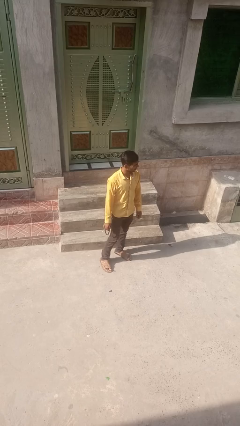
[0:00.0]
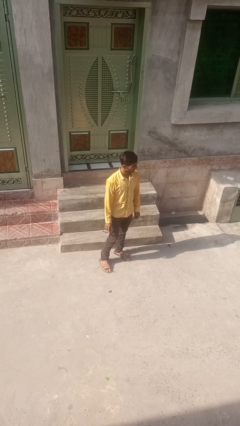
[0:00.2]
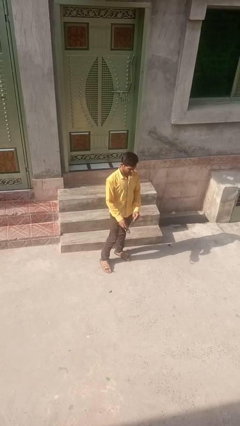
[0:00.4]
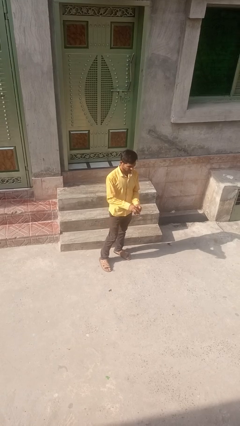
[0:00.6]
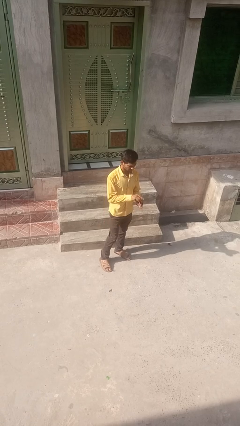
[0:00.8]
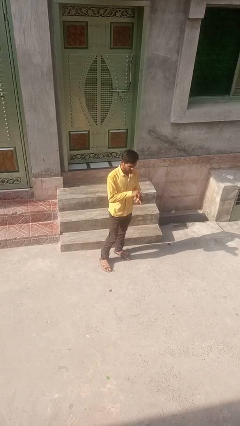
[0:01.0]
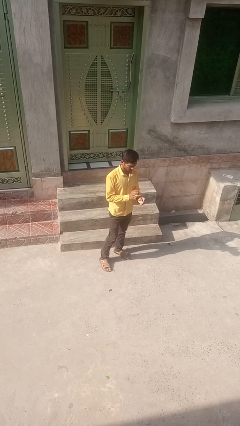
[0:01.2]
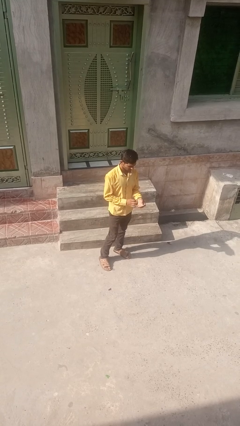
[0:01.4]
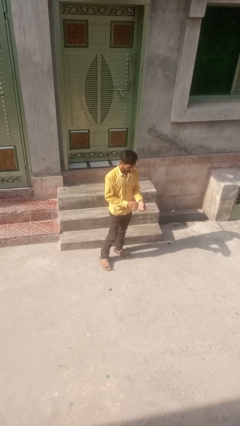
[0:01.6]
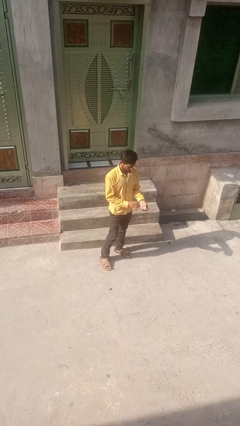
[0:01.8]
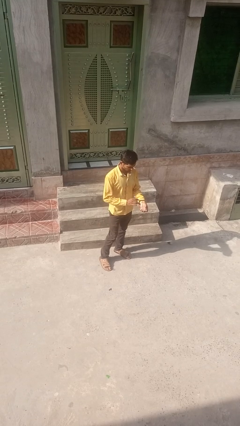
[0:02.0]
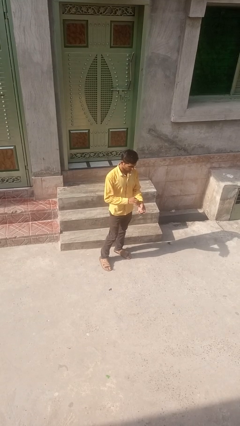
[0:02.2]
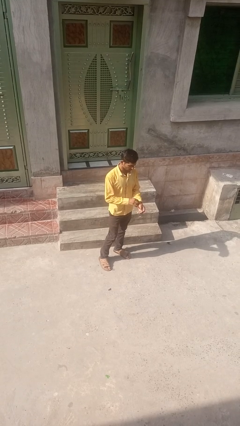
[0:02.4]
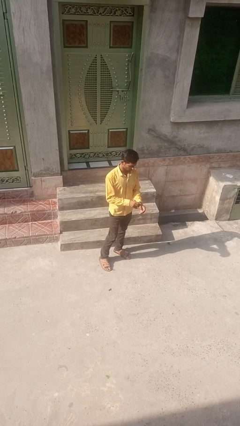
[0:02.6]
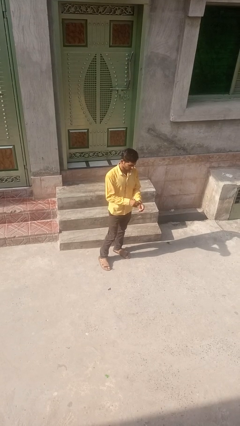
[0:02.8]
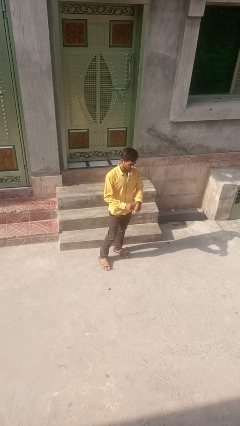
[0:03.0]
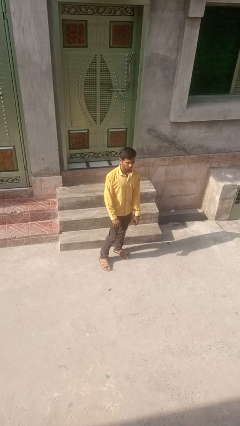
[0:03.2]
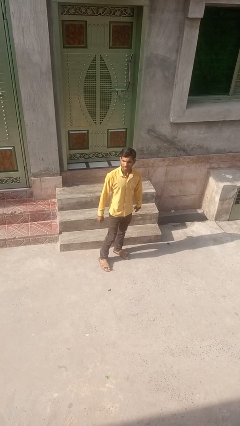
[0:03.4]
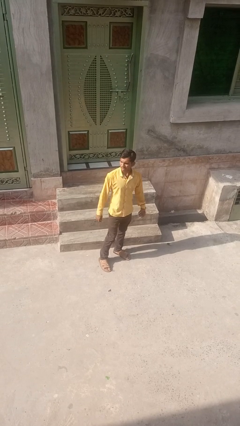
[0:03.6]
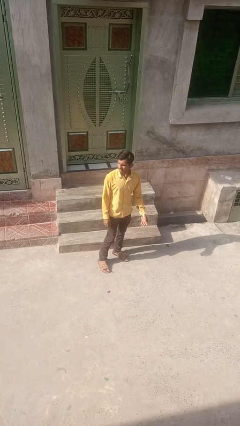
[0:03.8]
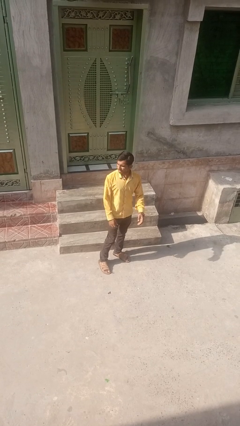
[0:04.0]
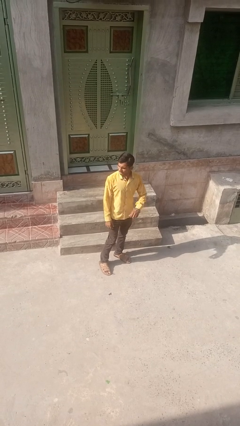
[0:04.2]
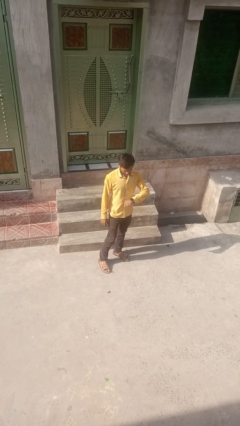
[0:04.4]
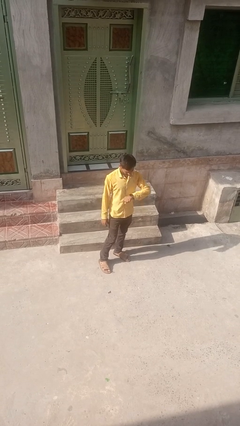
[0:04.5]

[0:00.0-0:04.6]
person puts on wristwatch

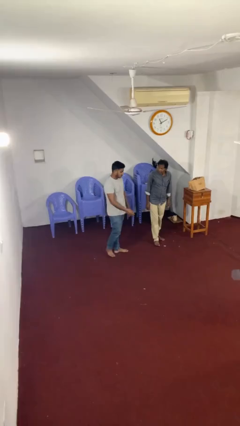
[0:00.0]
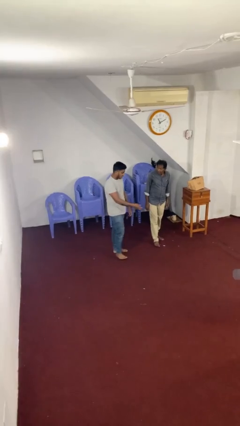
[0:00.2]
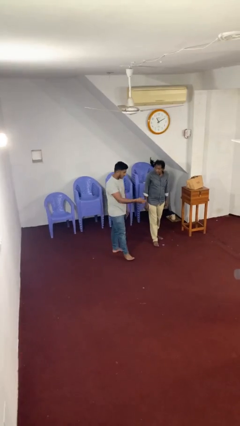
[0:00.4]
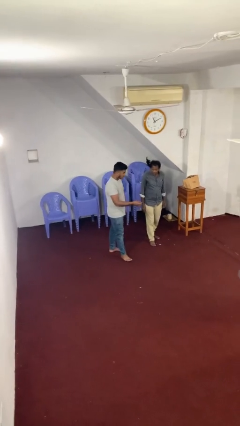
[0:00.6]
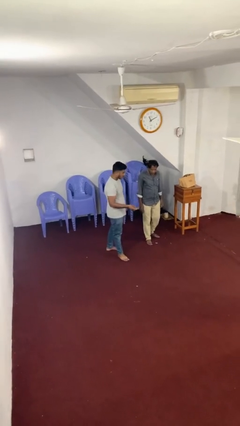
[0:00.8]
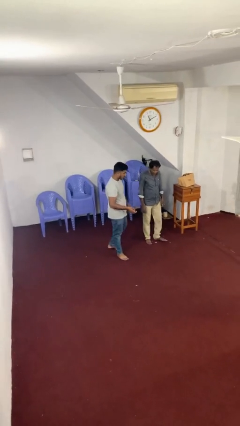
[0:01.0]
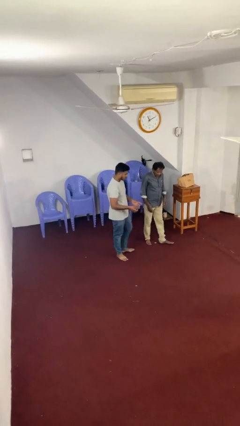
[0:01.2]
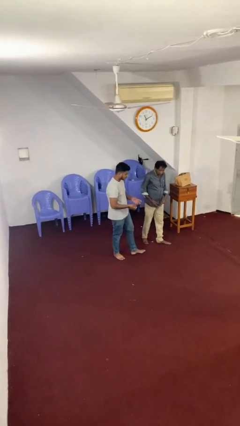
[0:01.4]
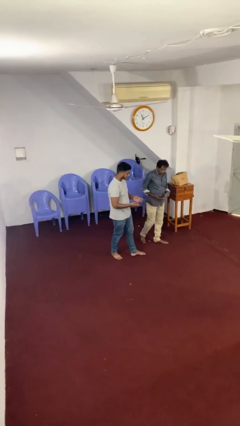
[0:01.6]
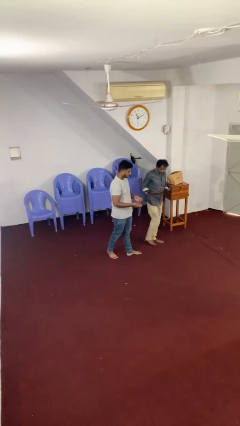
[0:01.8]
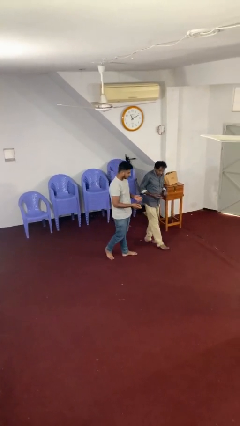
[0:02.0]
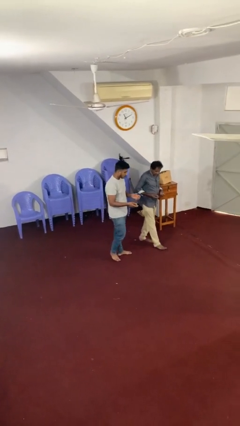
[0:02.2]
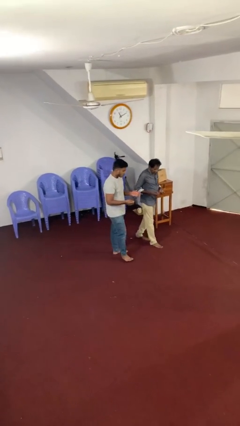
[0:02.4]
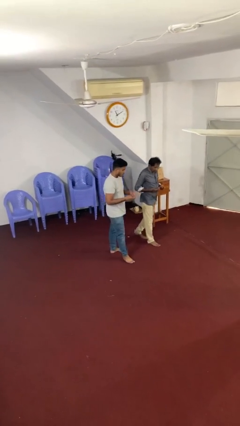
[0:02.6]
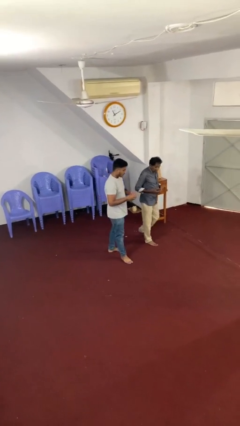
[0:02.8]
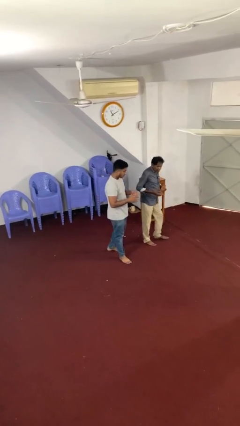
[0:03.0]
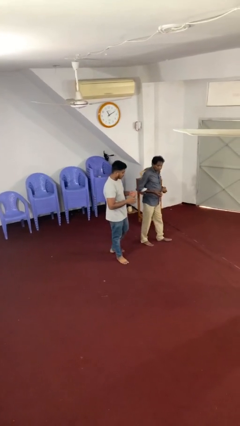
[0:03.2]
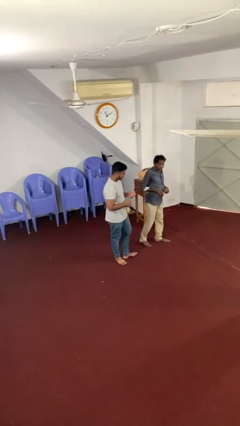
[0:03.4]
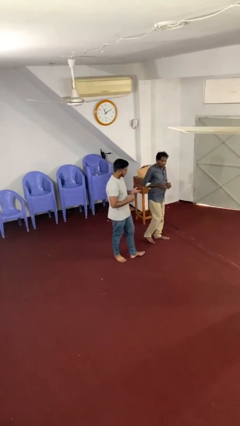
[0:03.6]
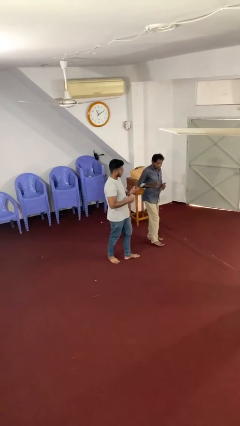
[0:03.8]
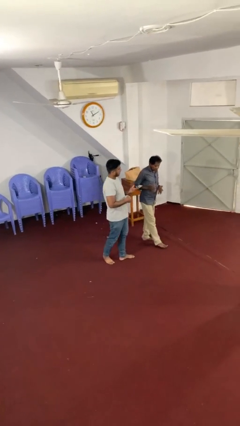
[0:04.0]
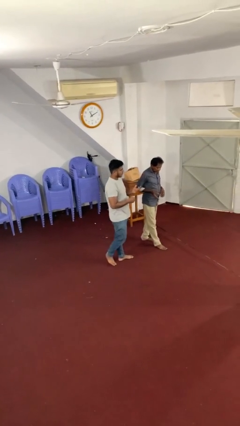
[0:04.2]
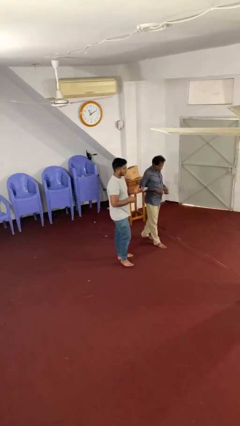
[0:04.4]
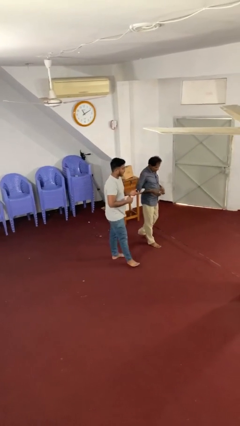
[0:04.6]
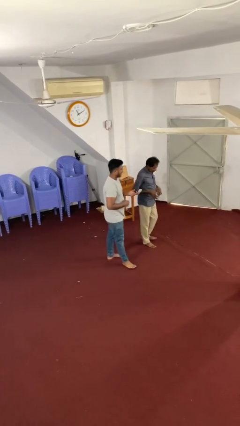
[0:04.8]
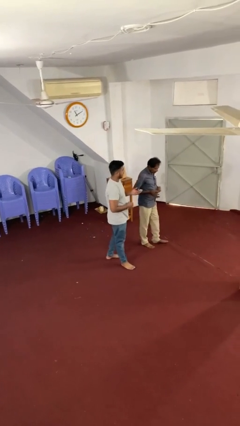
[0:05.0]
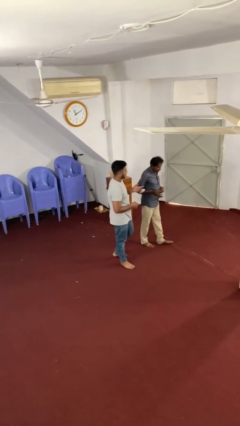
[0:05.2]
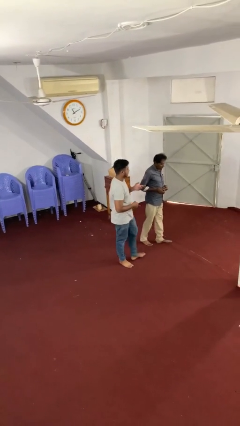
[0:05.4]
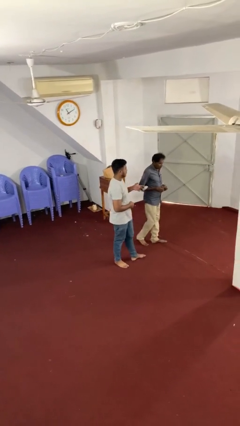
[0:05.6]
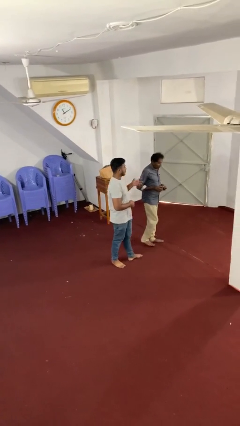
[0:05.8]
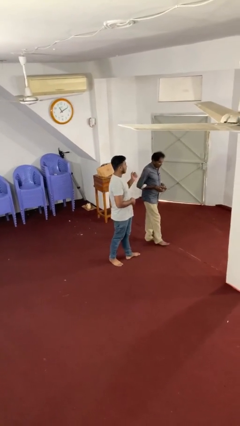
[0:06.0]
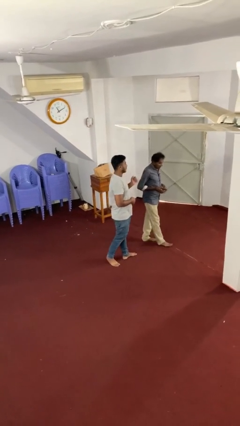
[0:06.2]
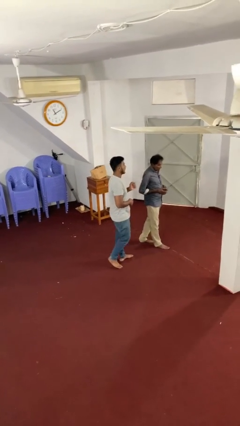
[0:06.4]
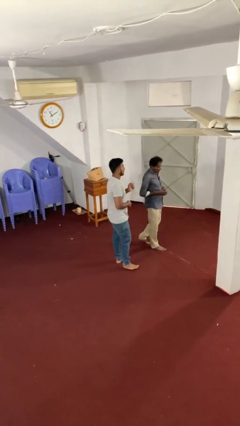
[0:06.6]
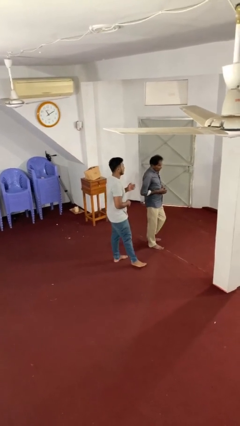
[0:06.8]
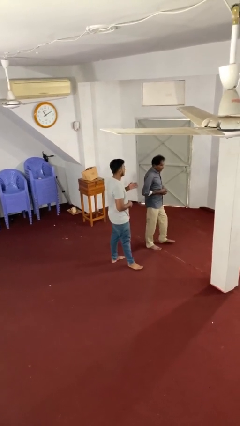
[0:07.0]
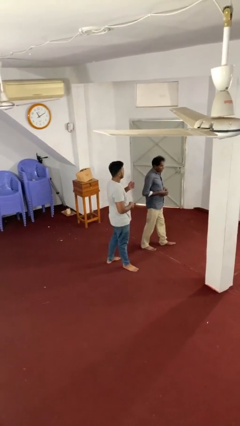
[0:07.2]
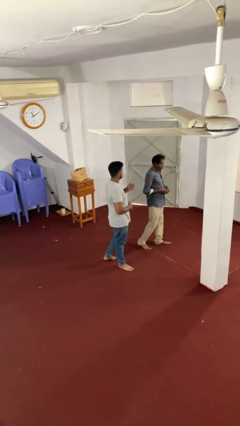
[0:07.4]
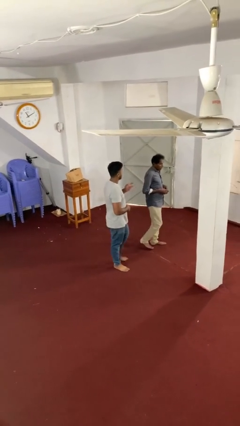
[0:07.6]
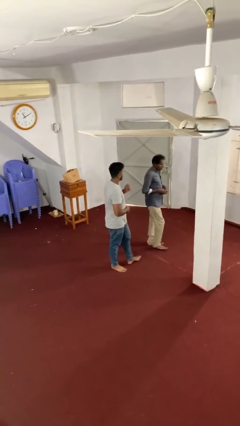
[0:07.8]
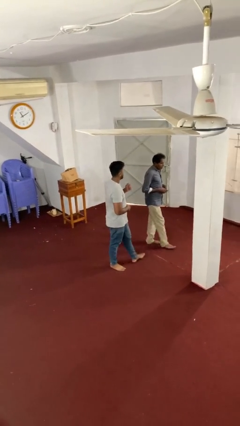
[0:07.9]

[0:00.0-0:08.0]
person talks to person

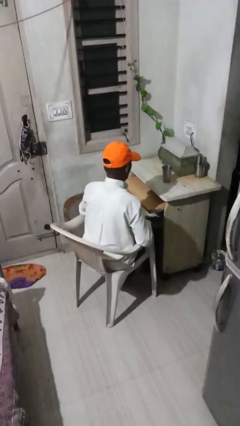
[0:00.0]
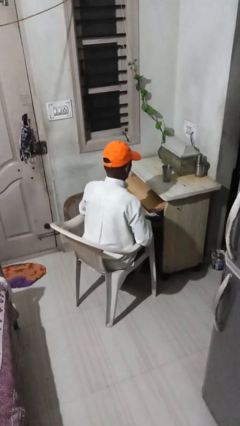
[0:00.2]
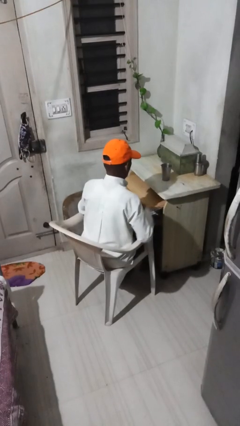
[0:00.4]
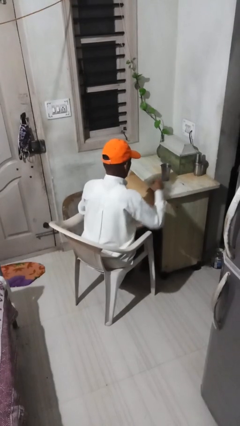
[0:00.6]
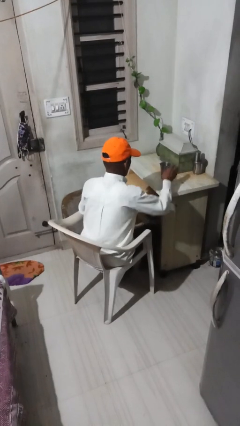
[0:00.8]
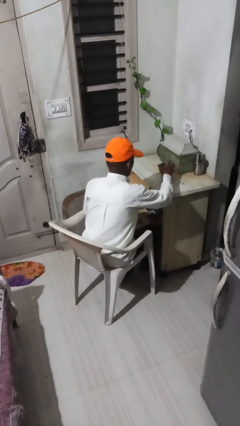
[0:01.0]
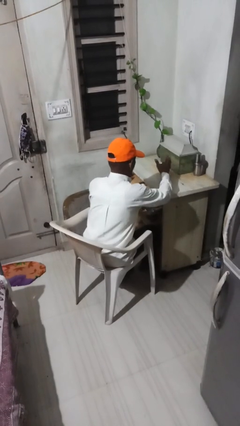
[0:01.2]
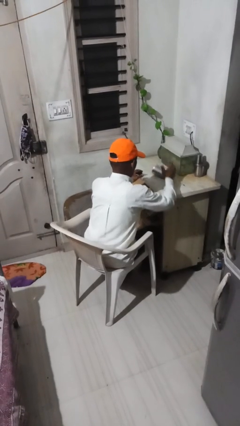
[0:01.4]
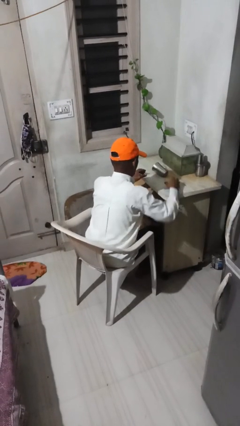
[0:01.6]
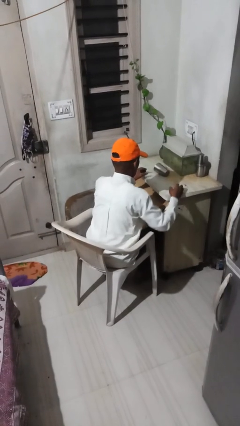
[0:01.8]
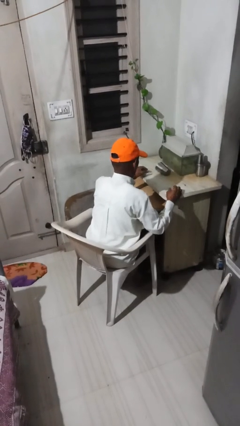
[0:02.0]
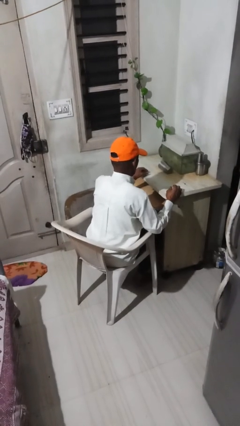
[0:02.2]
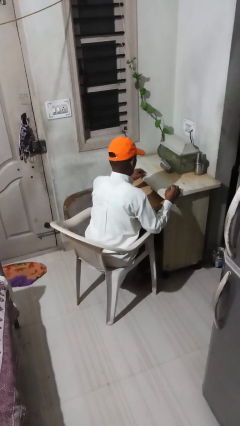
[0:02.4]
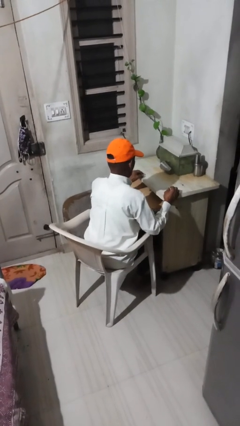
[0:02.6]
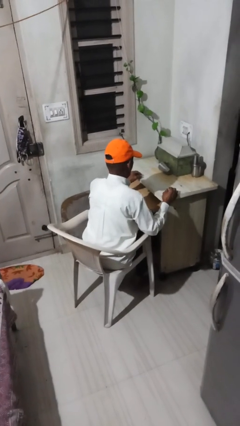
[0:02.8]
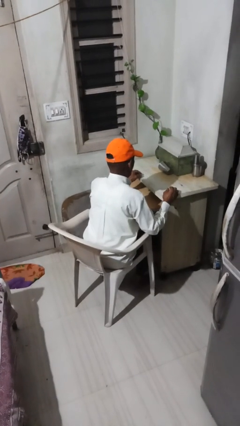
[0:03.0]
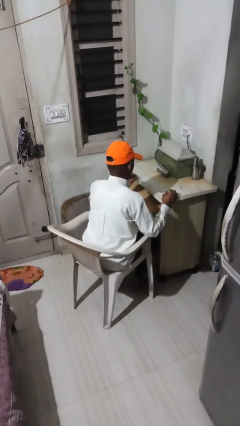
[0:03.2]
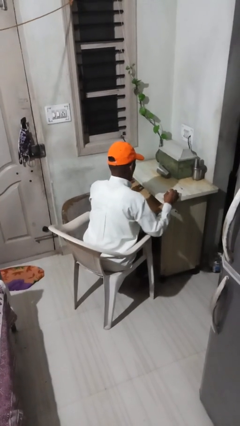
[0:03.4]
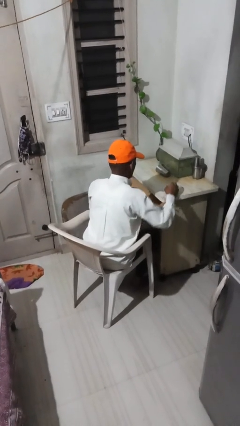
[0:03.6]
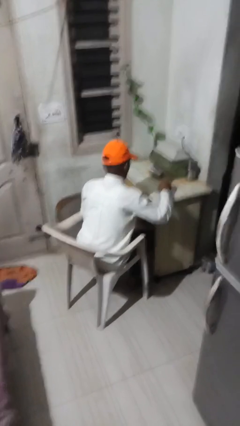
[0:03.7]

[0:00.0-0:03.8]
person knocks over glass

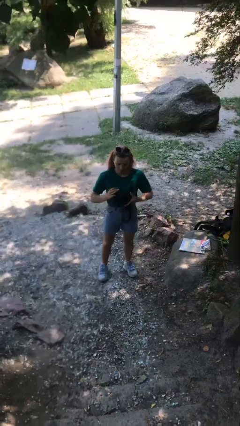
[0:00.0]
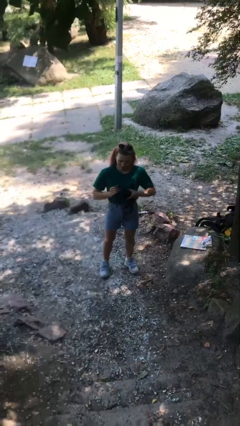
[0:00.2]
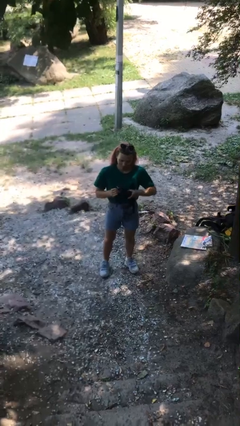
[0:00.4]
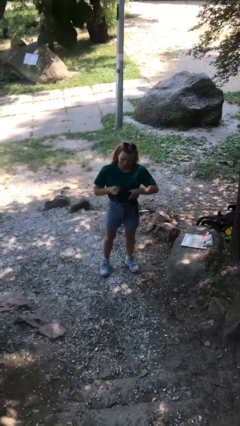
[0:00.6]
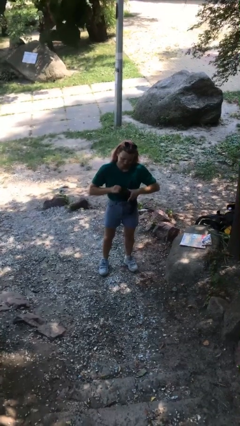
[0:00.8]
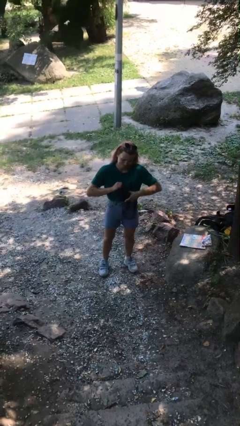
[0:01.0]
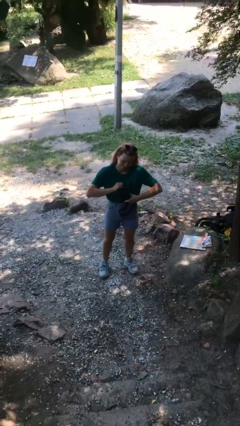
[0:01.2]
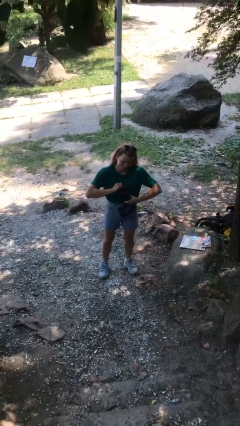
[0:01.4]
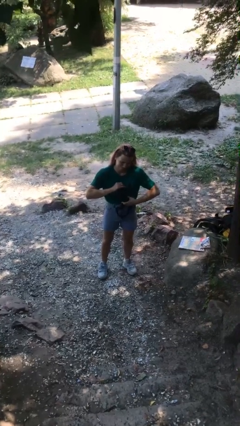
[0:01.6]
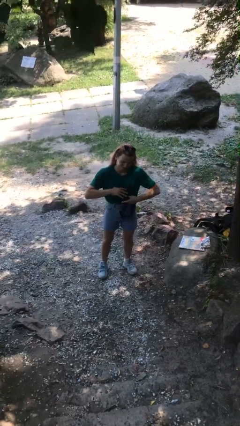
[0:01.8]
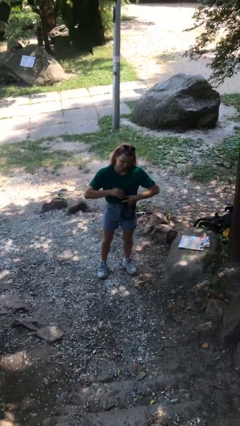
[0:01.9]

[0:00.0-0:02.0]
person squeezes object
